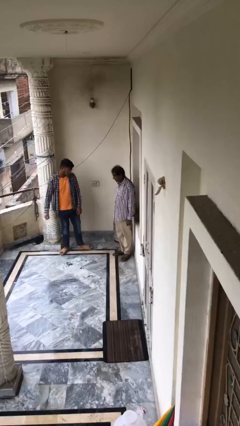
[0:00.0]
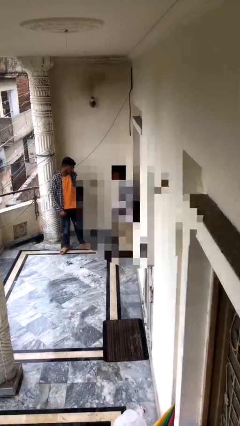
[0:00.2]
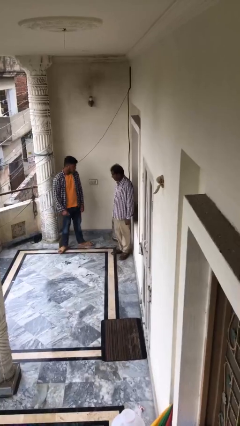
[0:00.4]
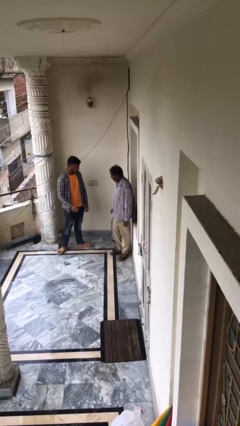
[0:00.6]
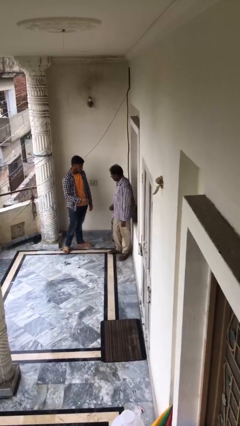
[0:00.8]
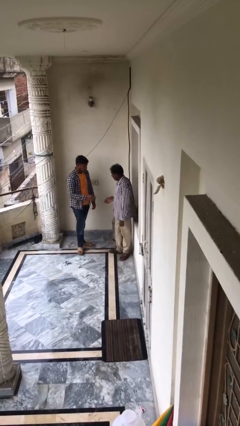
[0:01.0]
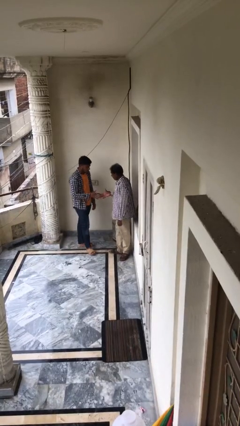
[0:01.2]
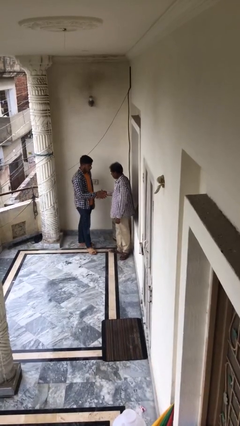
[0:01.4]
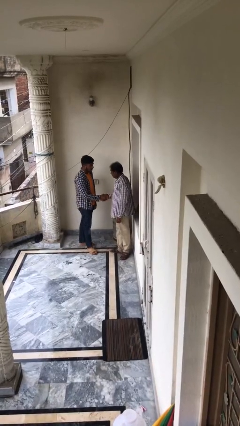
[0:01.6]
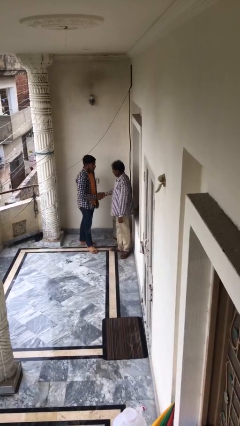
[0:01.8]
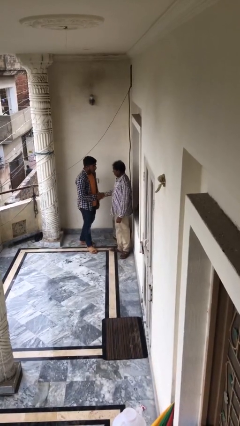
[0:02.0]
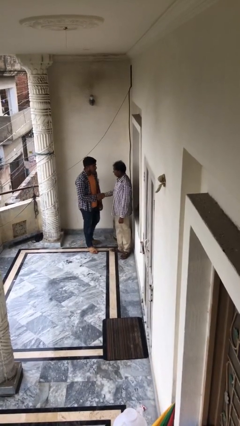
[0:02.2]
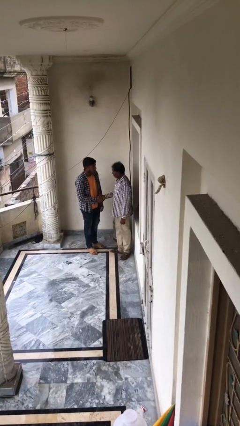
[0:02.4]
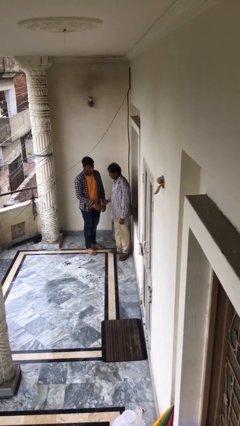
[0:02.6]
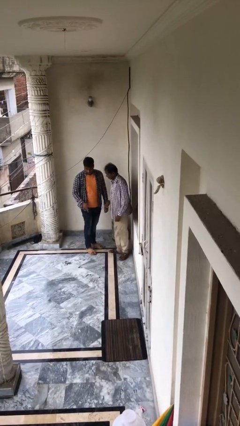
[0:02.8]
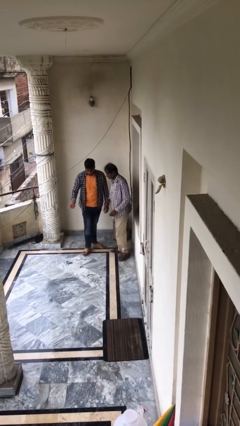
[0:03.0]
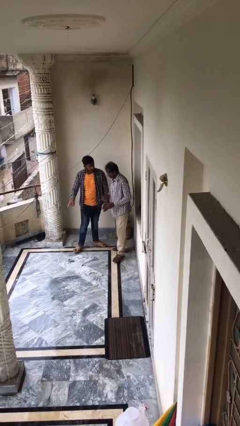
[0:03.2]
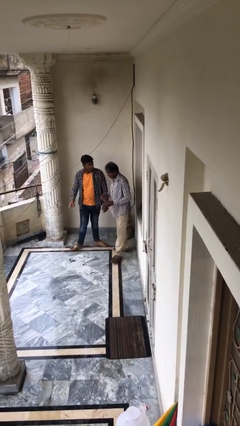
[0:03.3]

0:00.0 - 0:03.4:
person shakes hand

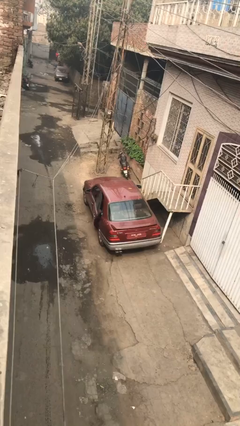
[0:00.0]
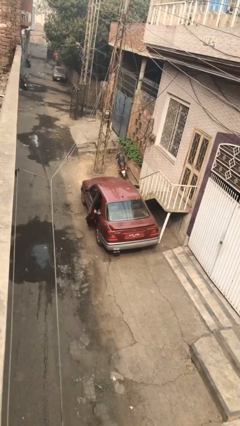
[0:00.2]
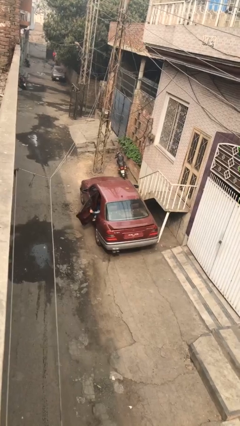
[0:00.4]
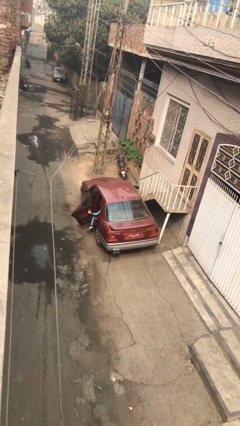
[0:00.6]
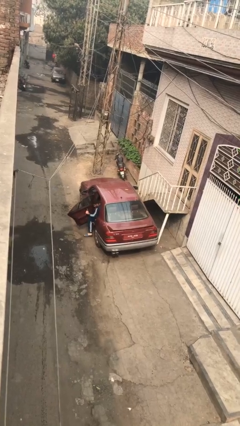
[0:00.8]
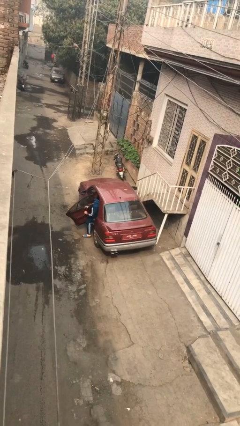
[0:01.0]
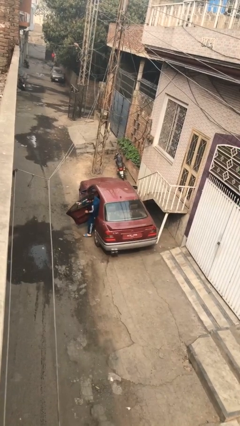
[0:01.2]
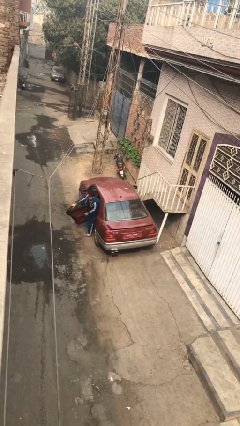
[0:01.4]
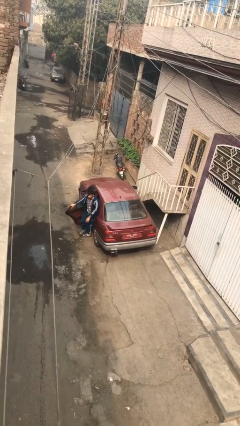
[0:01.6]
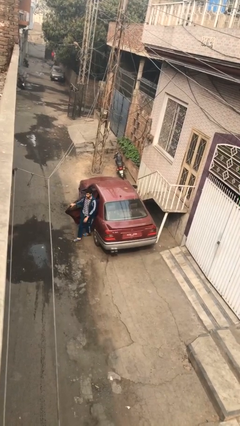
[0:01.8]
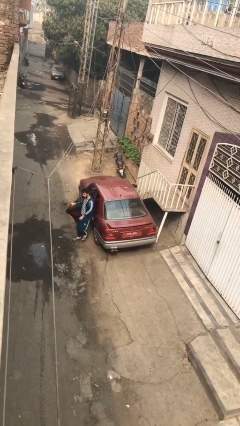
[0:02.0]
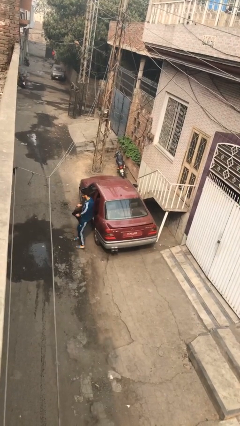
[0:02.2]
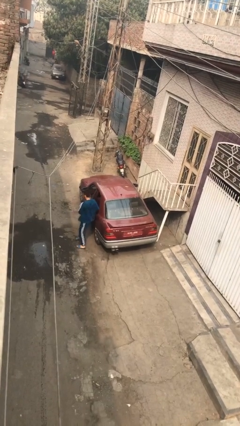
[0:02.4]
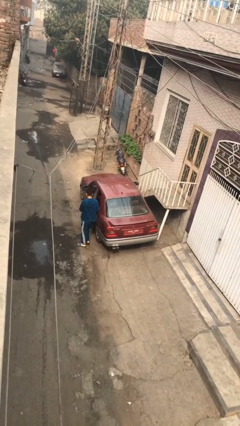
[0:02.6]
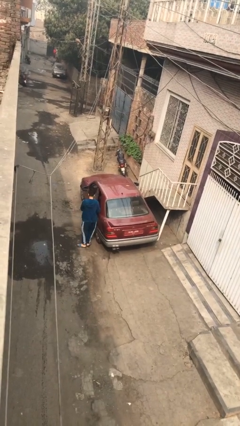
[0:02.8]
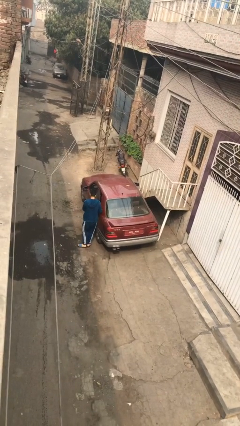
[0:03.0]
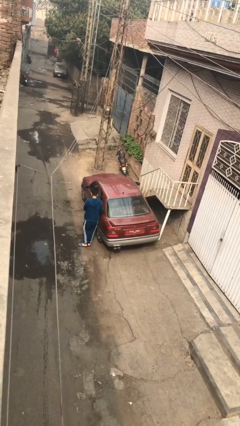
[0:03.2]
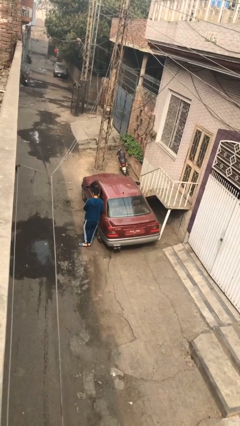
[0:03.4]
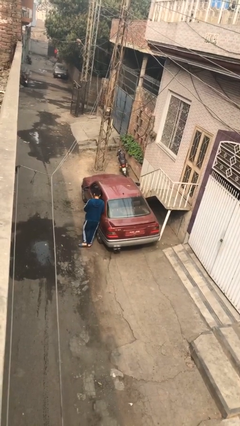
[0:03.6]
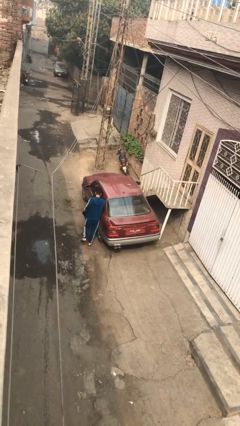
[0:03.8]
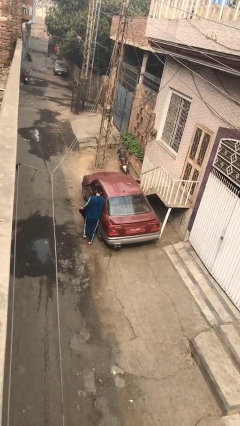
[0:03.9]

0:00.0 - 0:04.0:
car drops off person

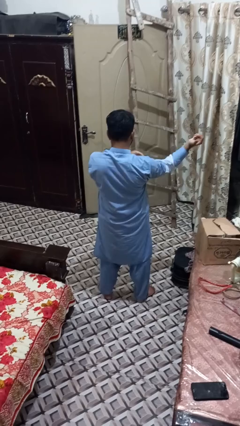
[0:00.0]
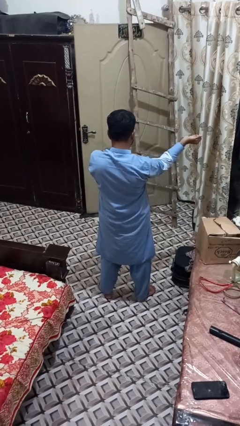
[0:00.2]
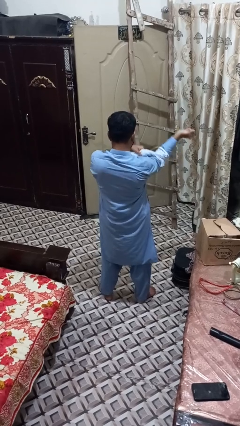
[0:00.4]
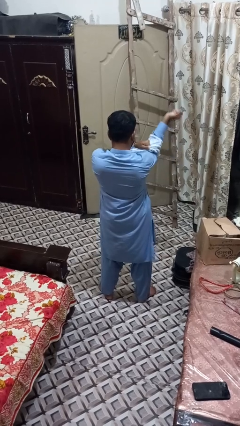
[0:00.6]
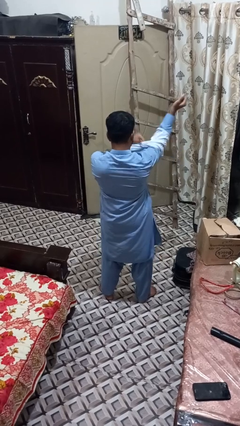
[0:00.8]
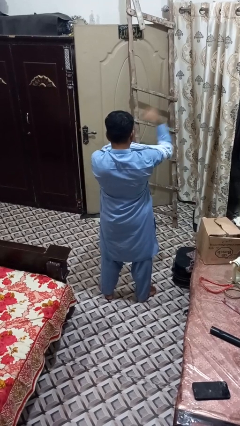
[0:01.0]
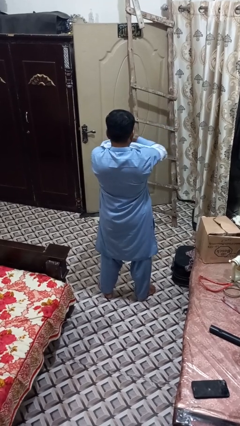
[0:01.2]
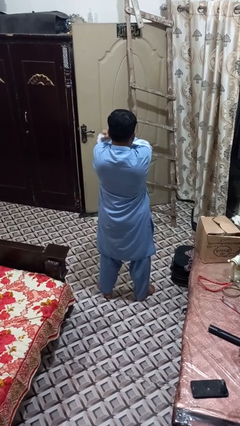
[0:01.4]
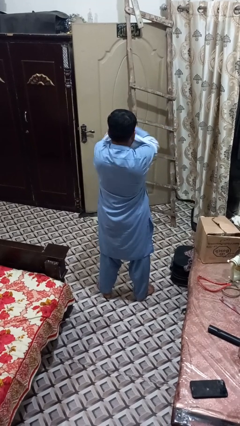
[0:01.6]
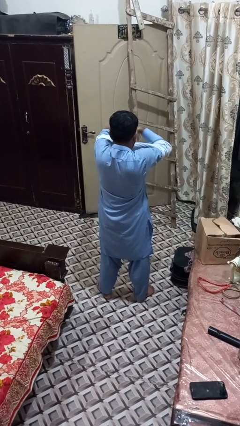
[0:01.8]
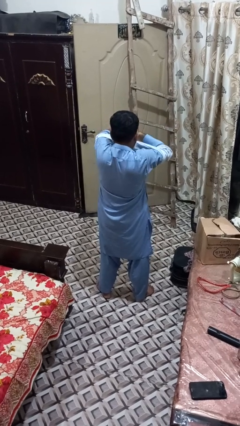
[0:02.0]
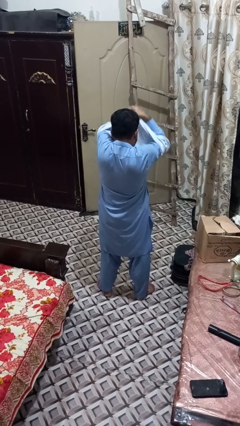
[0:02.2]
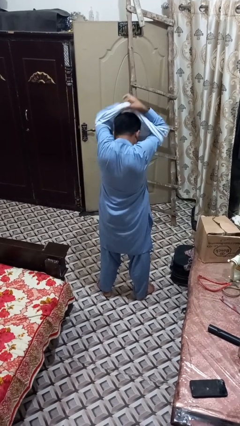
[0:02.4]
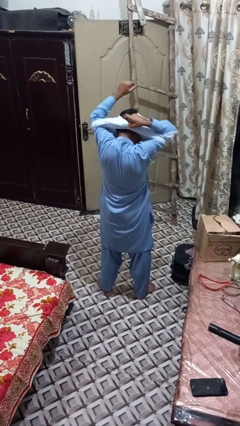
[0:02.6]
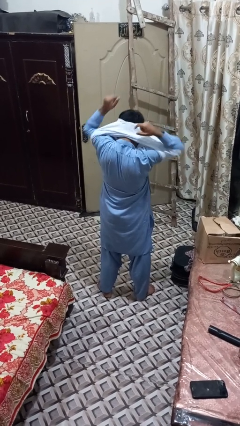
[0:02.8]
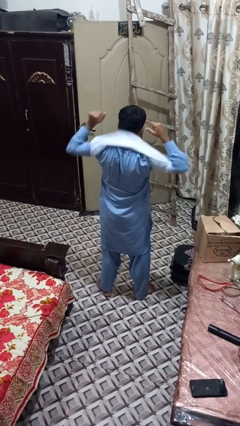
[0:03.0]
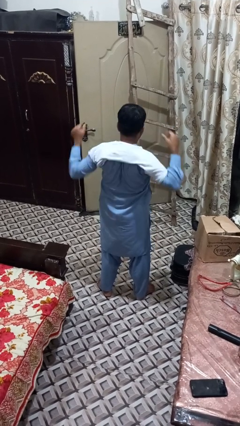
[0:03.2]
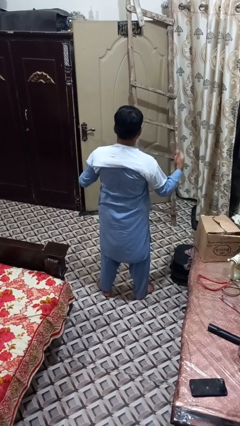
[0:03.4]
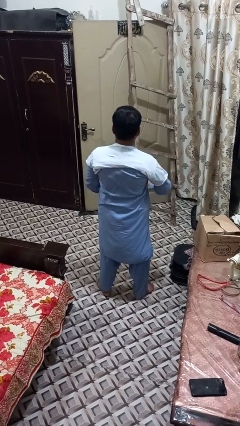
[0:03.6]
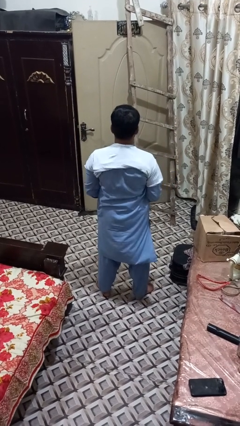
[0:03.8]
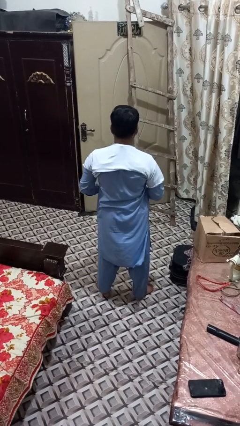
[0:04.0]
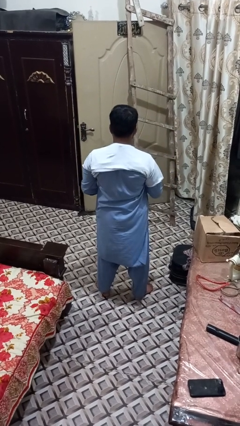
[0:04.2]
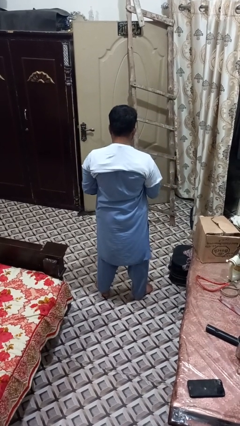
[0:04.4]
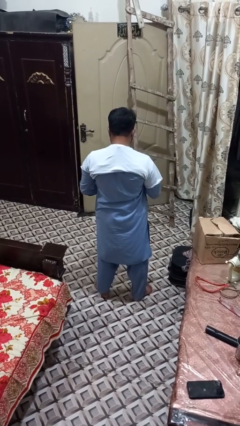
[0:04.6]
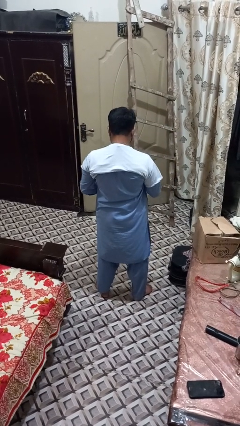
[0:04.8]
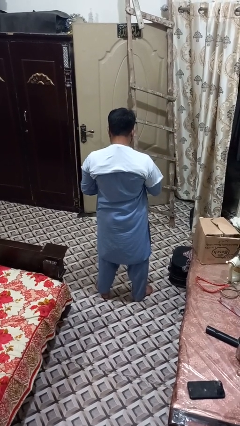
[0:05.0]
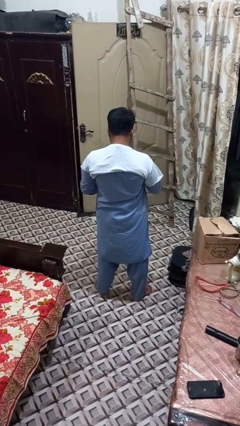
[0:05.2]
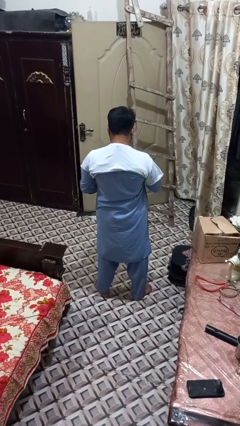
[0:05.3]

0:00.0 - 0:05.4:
person puts on shirt

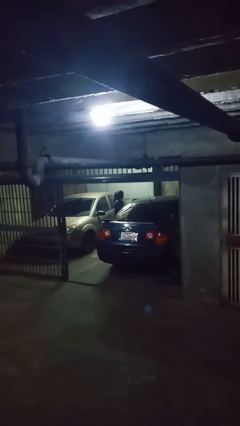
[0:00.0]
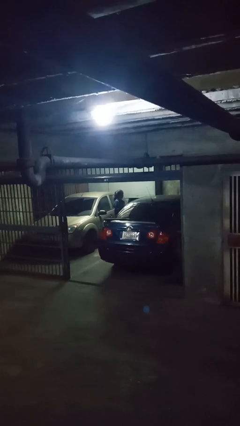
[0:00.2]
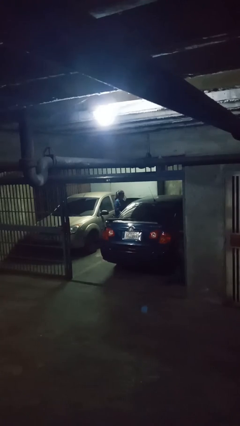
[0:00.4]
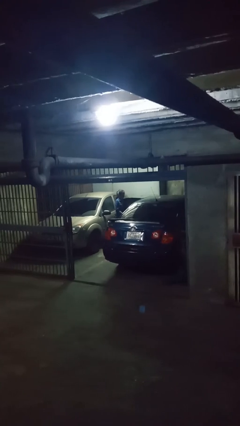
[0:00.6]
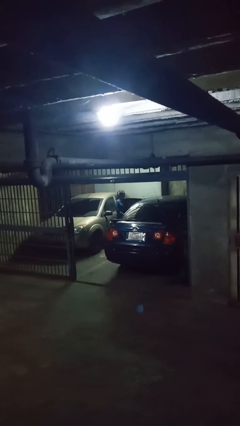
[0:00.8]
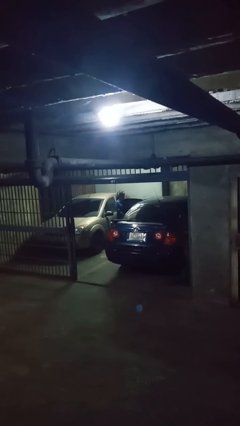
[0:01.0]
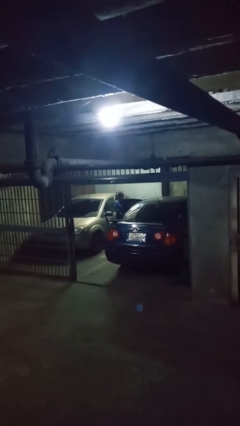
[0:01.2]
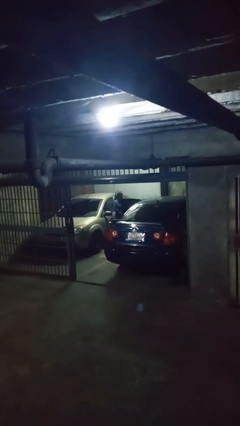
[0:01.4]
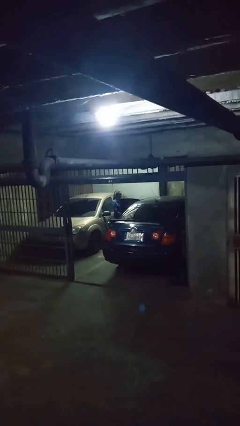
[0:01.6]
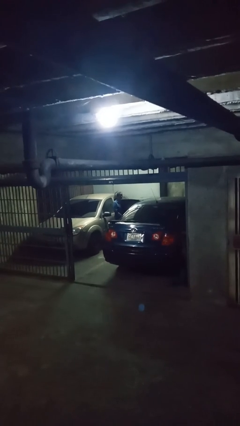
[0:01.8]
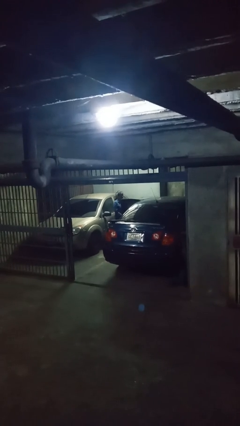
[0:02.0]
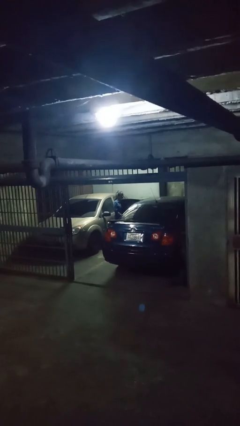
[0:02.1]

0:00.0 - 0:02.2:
person opens car door

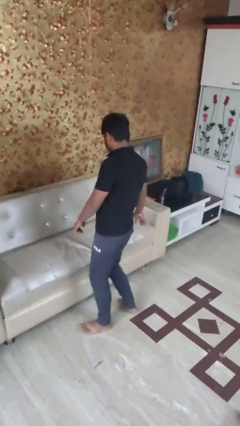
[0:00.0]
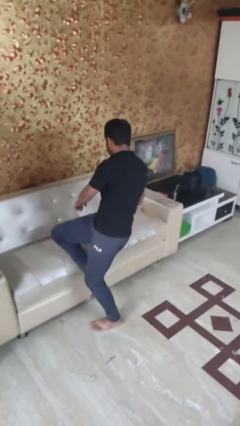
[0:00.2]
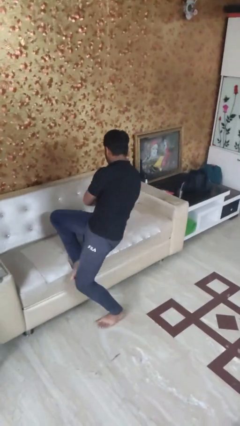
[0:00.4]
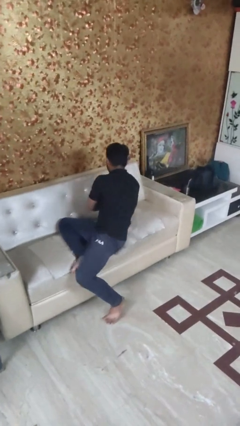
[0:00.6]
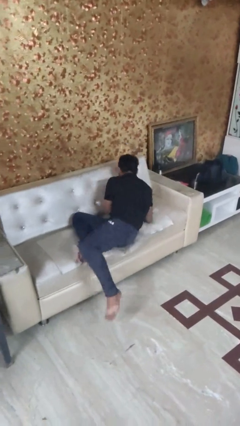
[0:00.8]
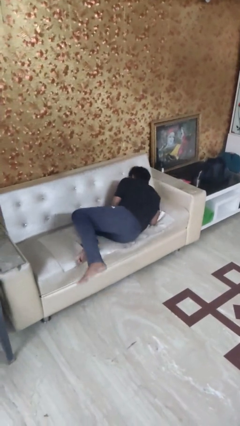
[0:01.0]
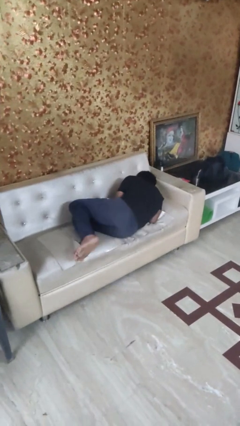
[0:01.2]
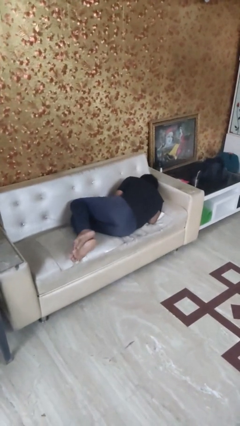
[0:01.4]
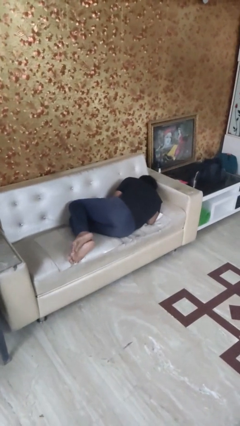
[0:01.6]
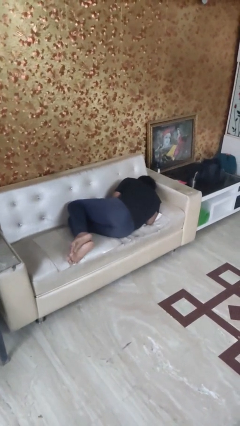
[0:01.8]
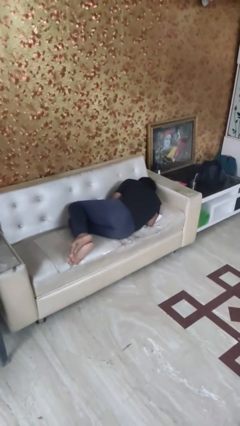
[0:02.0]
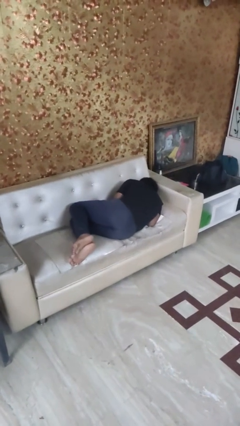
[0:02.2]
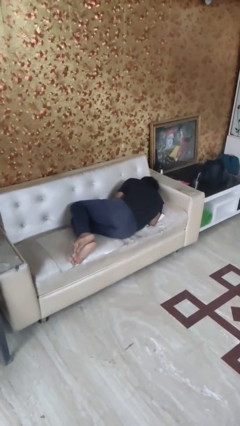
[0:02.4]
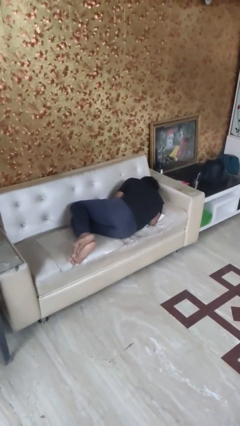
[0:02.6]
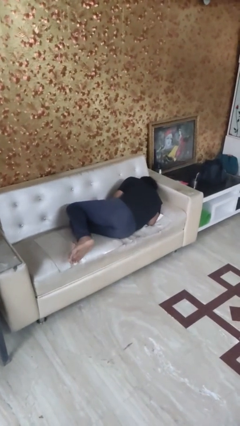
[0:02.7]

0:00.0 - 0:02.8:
person lies down on couch
